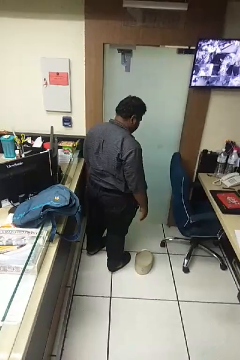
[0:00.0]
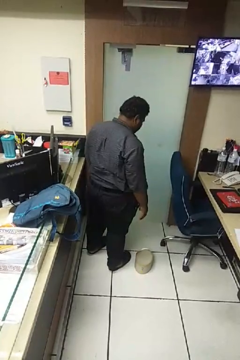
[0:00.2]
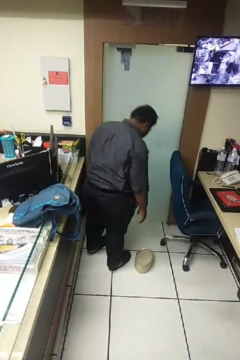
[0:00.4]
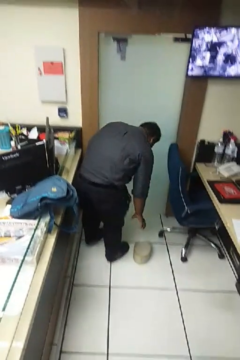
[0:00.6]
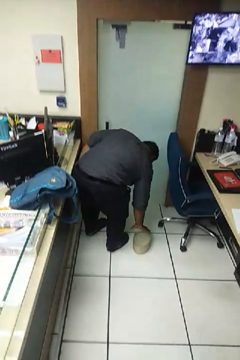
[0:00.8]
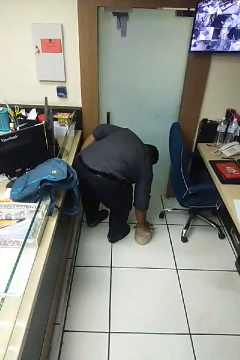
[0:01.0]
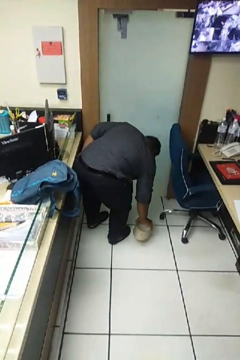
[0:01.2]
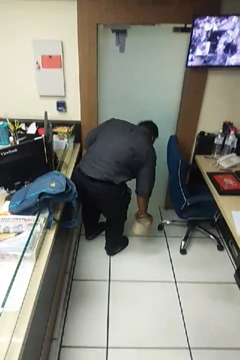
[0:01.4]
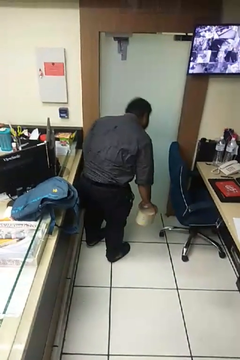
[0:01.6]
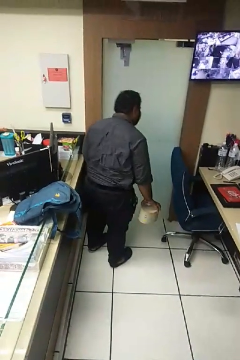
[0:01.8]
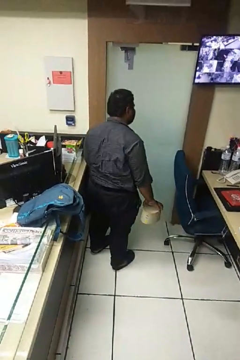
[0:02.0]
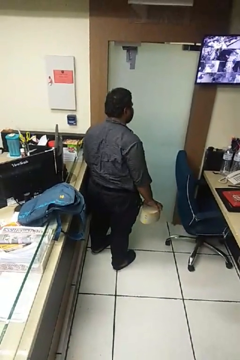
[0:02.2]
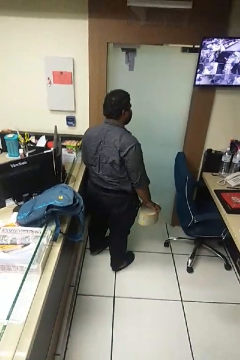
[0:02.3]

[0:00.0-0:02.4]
person picks up object from floor

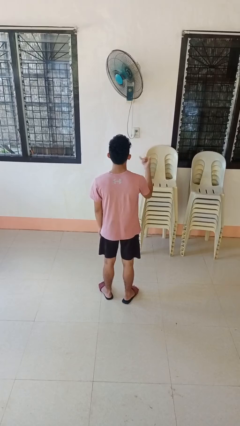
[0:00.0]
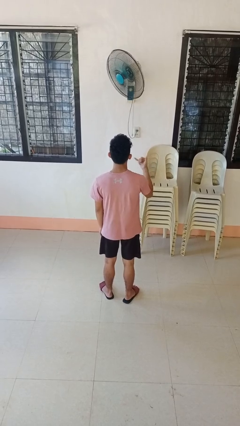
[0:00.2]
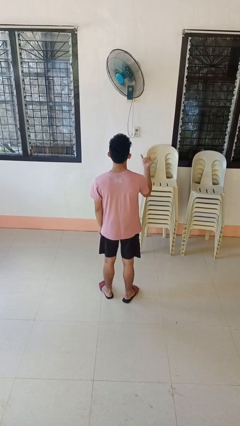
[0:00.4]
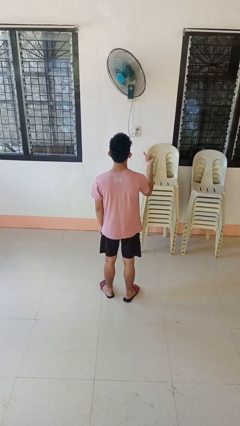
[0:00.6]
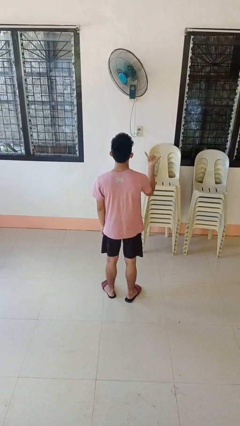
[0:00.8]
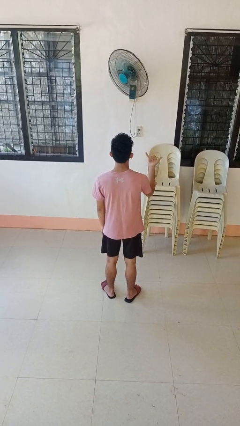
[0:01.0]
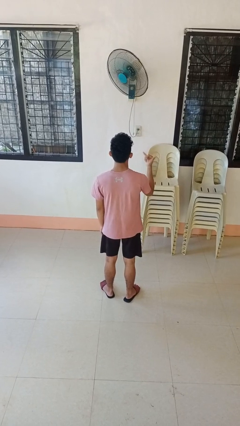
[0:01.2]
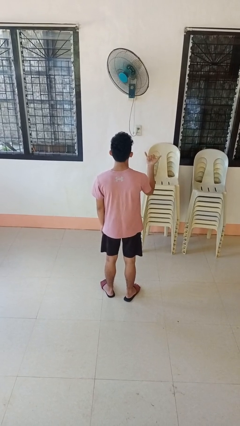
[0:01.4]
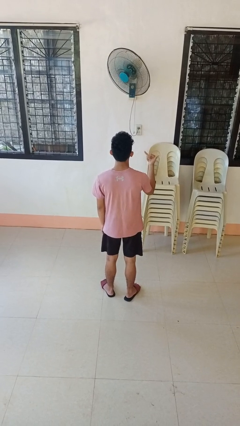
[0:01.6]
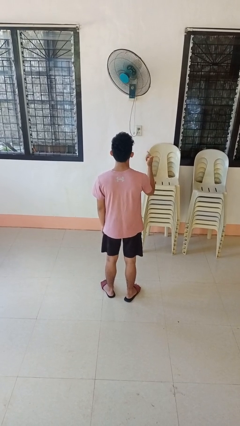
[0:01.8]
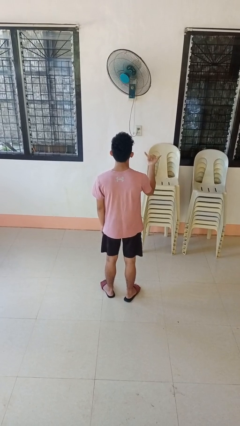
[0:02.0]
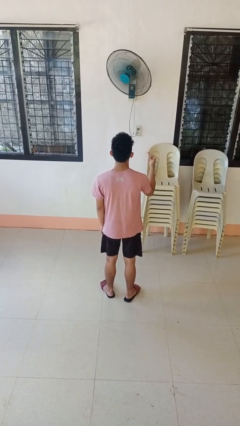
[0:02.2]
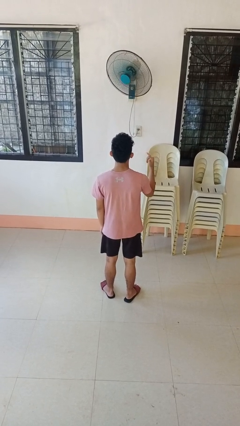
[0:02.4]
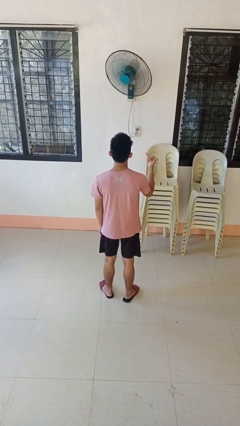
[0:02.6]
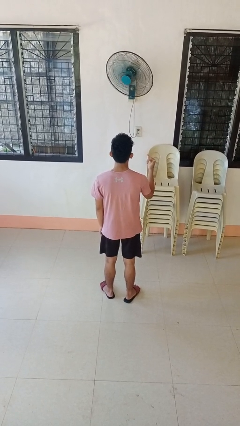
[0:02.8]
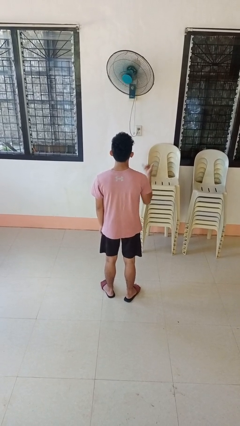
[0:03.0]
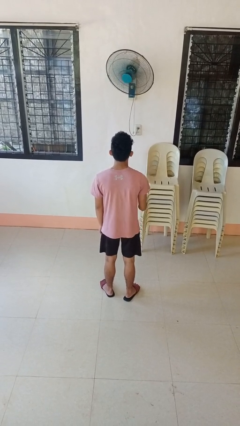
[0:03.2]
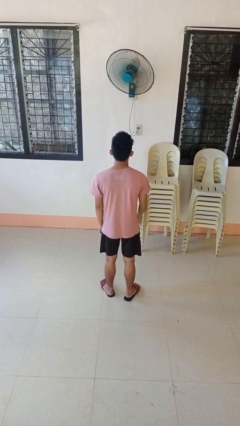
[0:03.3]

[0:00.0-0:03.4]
person gestures hang loose

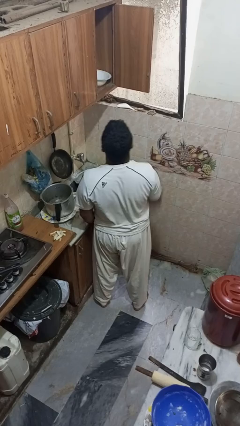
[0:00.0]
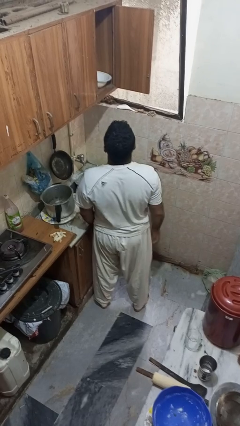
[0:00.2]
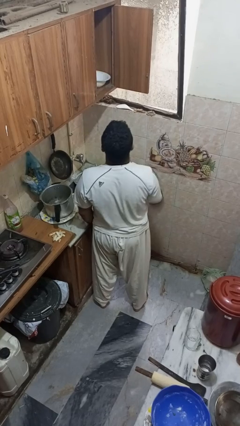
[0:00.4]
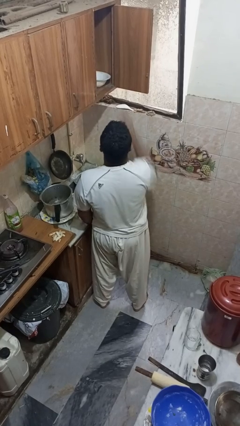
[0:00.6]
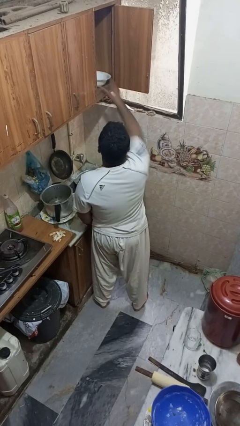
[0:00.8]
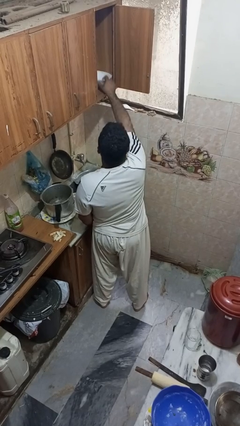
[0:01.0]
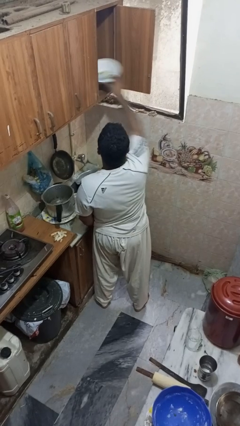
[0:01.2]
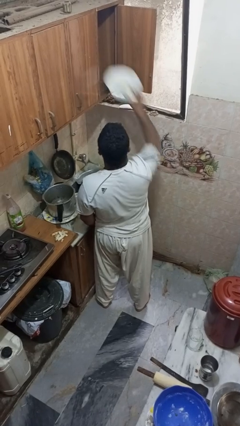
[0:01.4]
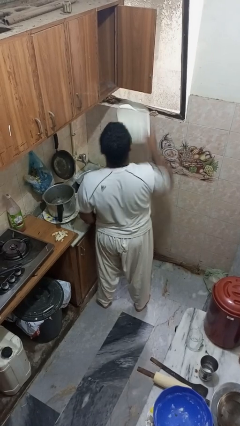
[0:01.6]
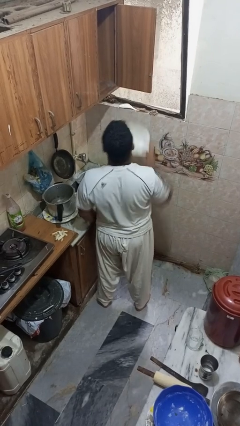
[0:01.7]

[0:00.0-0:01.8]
person takes object from cabinet

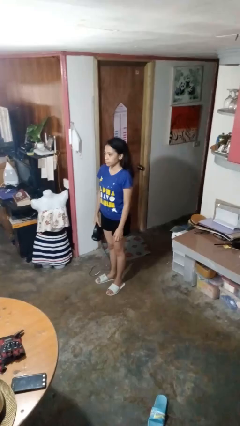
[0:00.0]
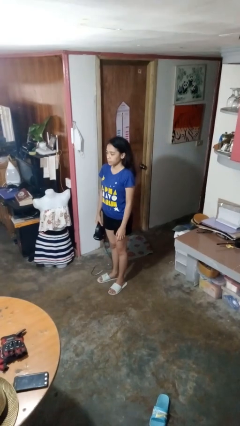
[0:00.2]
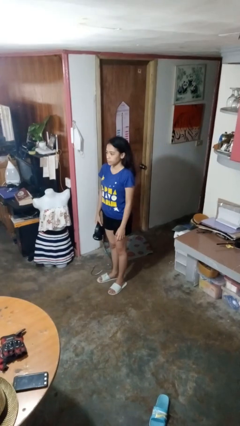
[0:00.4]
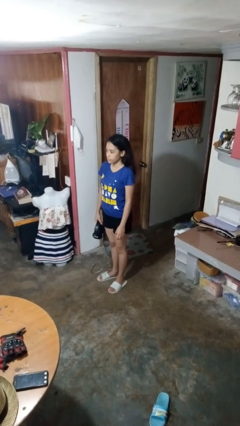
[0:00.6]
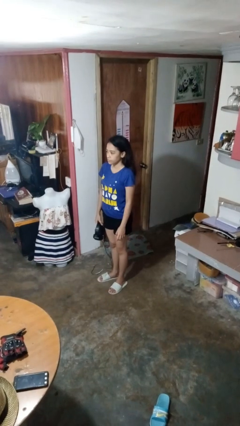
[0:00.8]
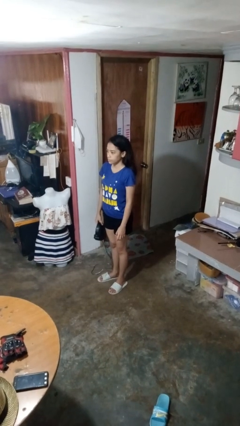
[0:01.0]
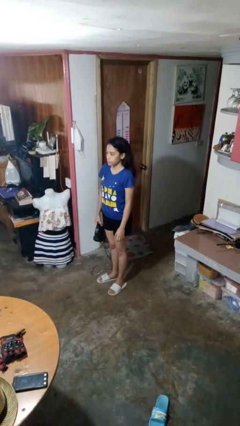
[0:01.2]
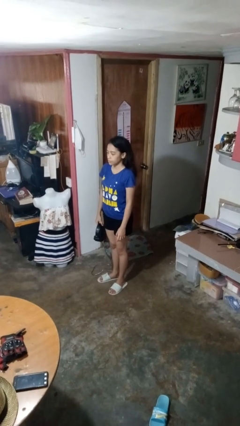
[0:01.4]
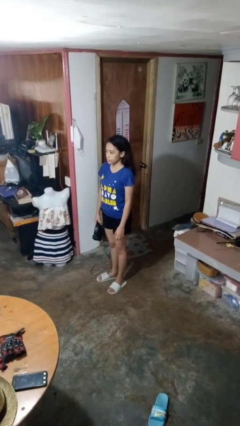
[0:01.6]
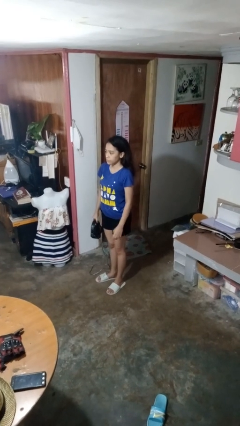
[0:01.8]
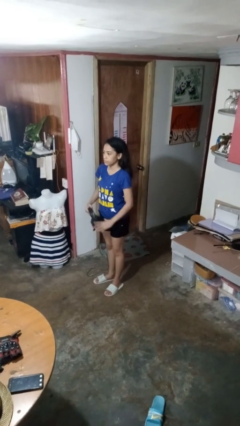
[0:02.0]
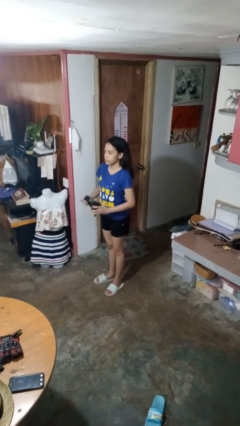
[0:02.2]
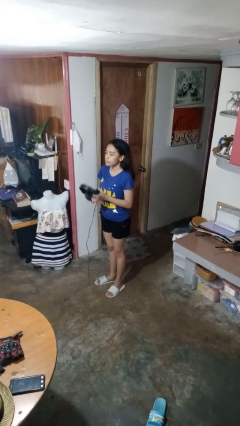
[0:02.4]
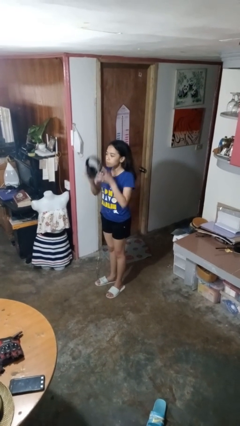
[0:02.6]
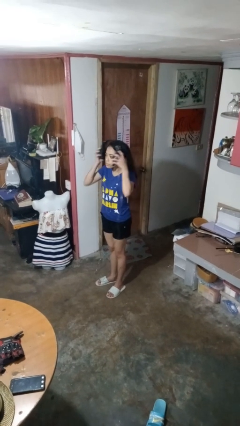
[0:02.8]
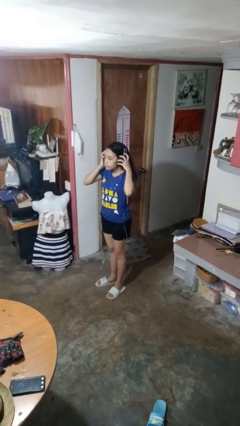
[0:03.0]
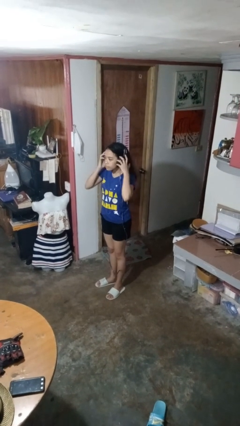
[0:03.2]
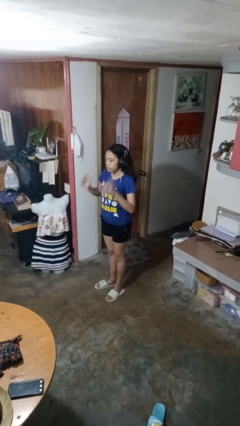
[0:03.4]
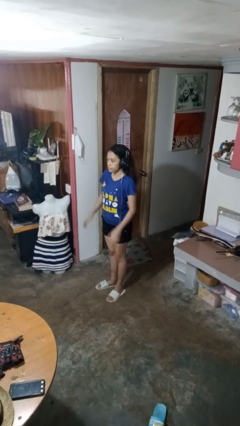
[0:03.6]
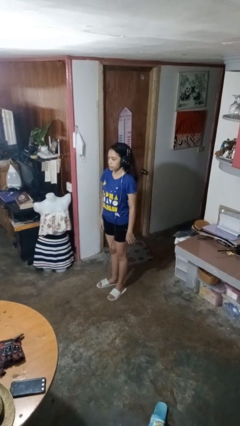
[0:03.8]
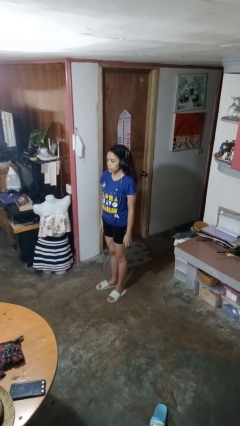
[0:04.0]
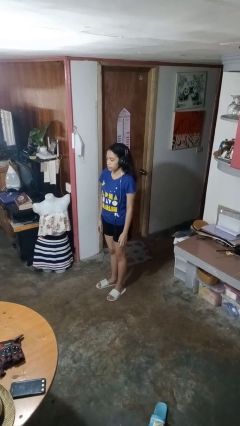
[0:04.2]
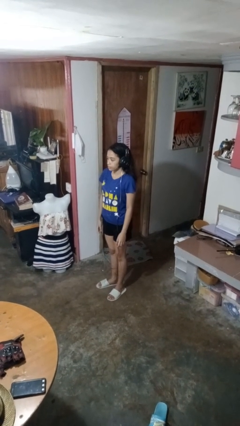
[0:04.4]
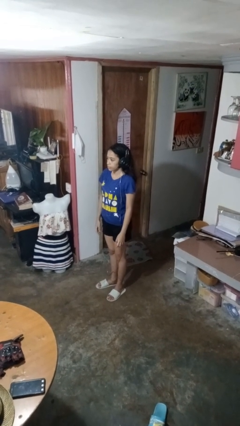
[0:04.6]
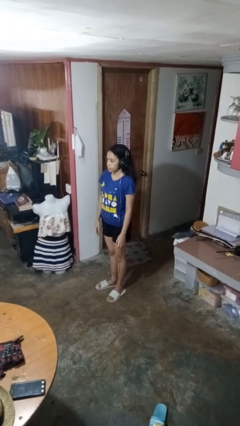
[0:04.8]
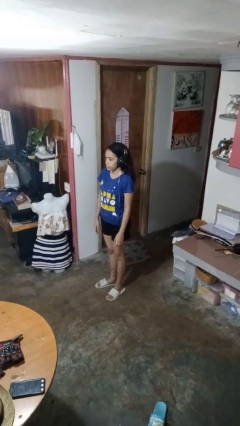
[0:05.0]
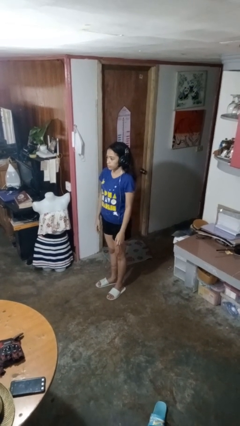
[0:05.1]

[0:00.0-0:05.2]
person puts on headphones

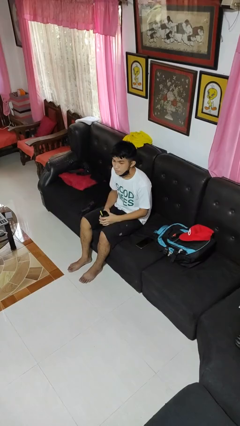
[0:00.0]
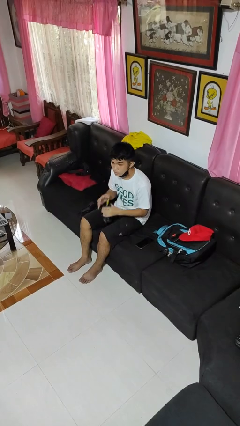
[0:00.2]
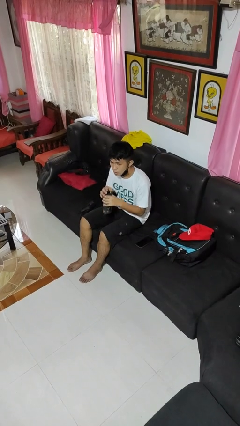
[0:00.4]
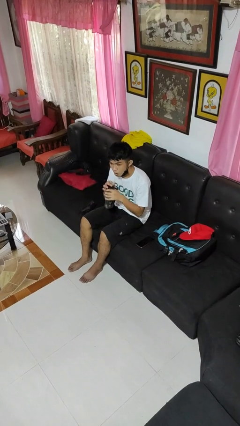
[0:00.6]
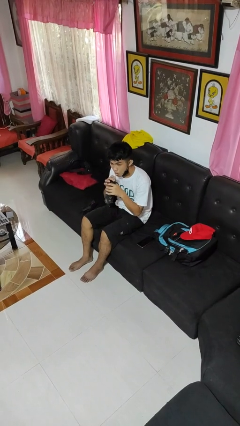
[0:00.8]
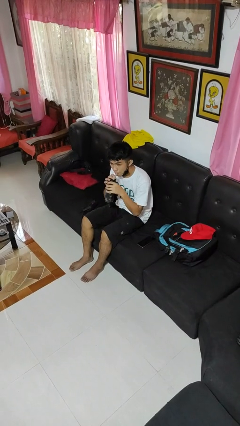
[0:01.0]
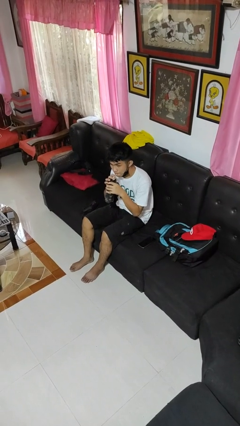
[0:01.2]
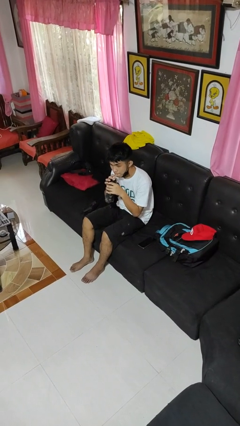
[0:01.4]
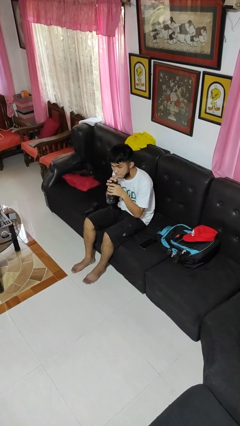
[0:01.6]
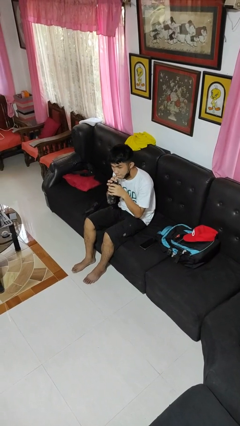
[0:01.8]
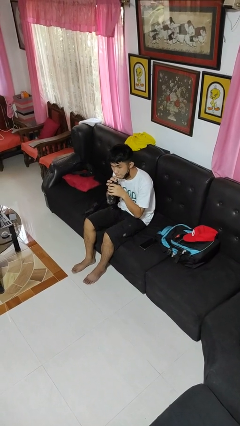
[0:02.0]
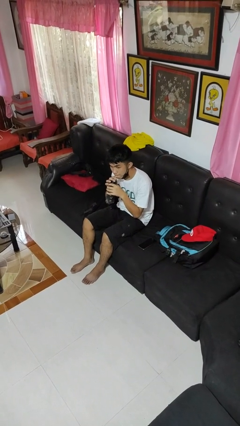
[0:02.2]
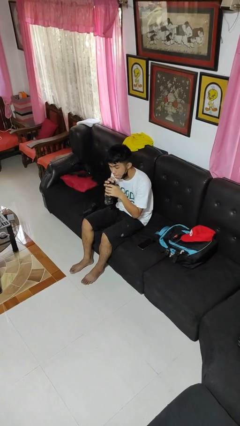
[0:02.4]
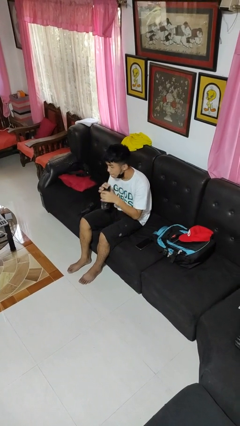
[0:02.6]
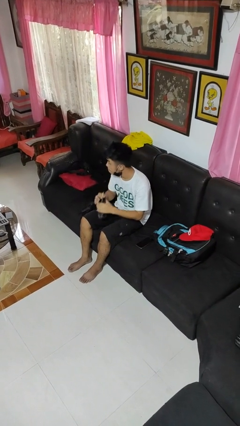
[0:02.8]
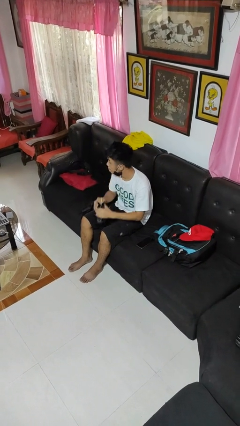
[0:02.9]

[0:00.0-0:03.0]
person drinks from straw

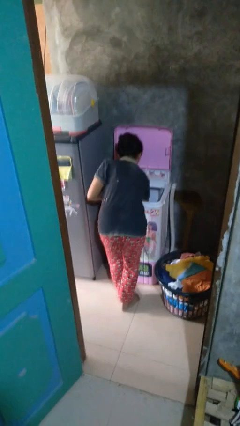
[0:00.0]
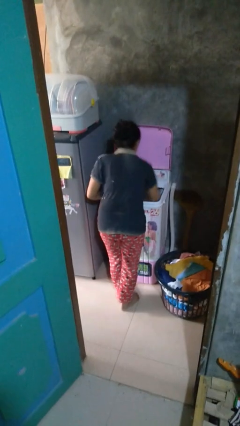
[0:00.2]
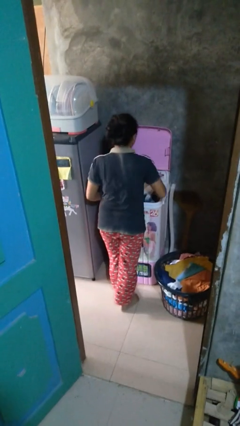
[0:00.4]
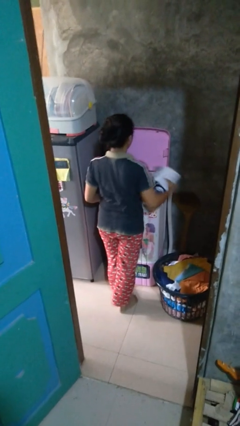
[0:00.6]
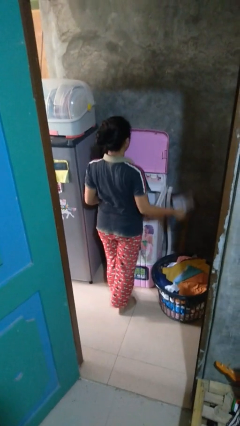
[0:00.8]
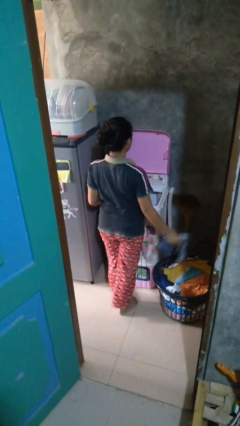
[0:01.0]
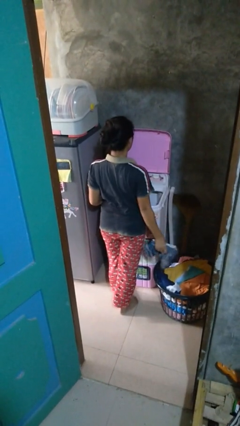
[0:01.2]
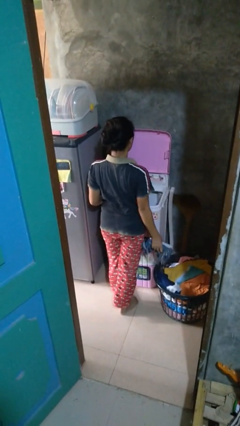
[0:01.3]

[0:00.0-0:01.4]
person unloads clotheswasher

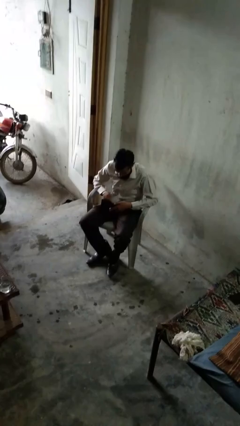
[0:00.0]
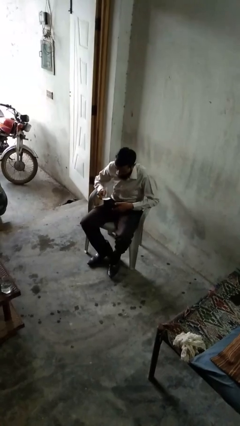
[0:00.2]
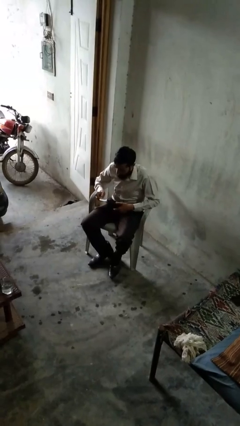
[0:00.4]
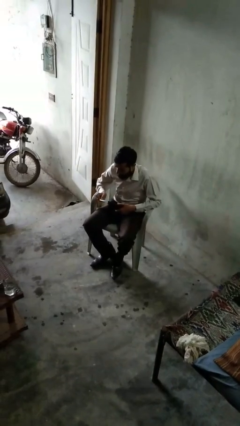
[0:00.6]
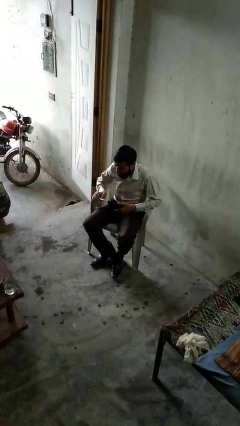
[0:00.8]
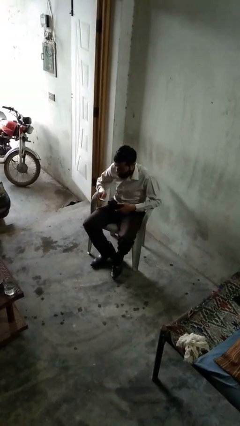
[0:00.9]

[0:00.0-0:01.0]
person takes object from purse
